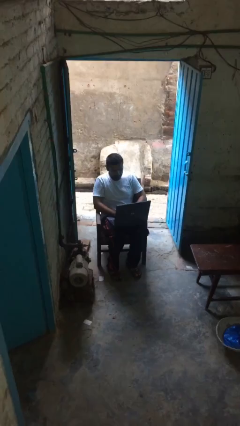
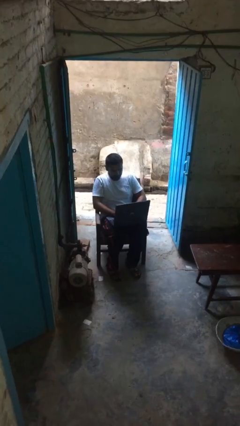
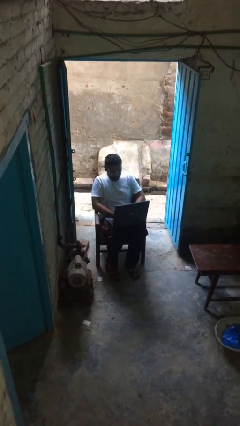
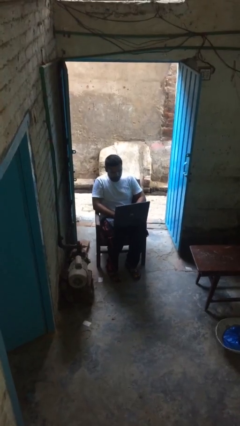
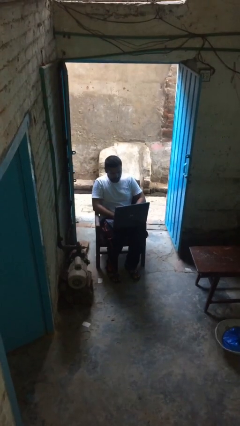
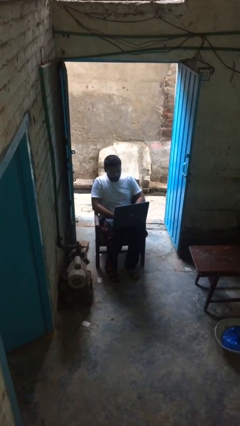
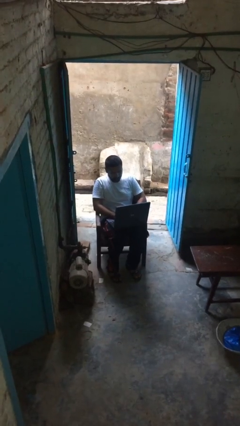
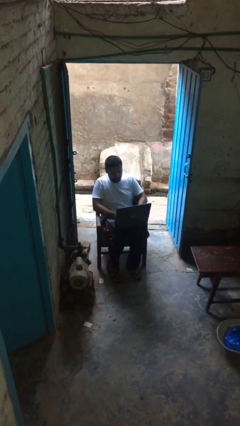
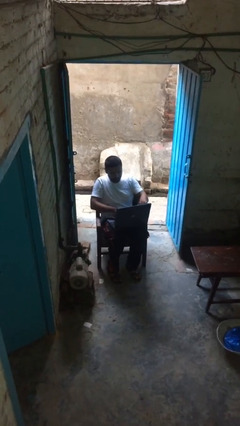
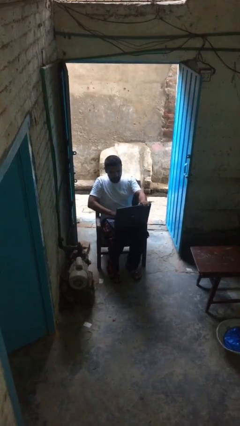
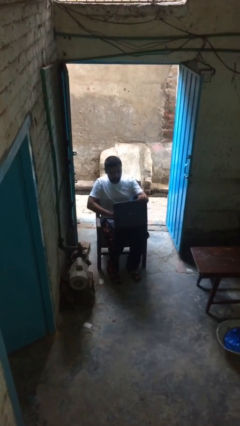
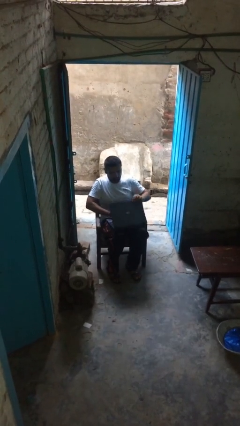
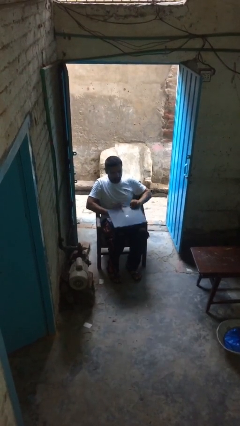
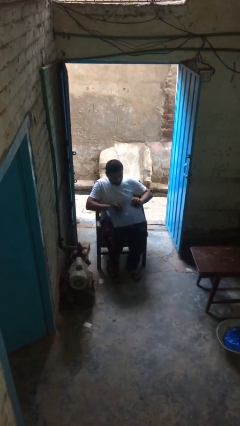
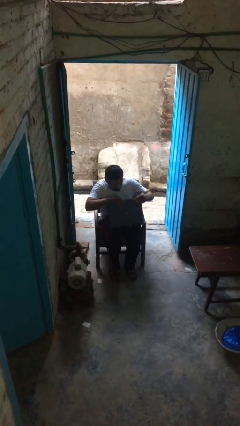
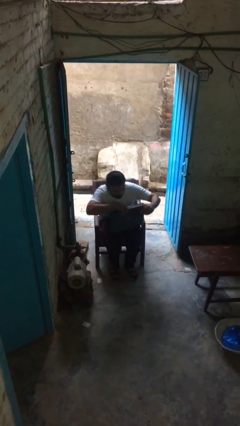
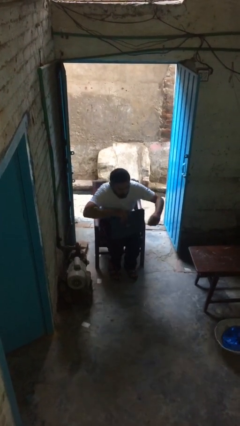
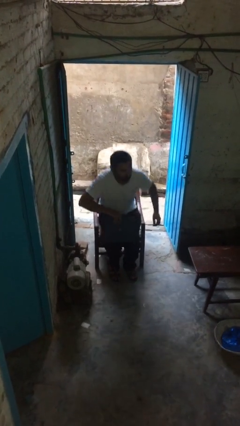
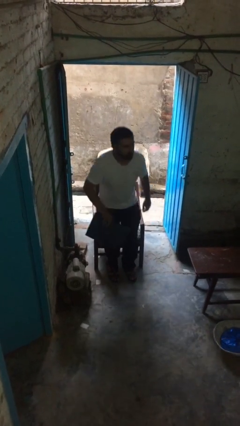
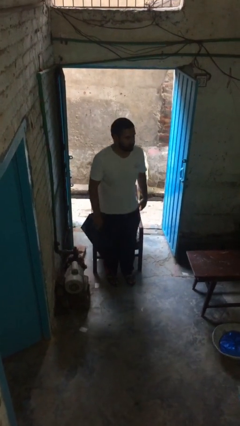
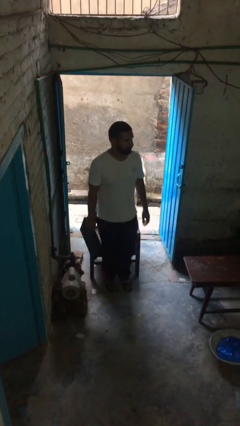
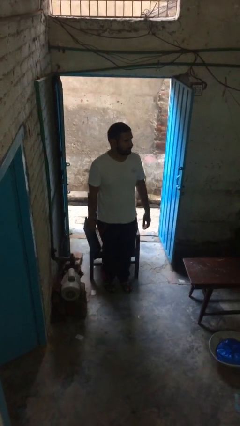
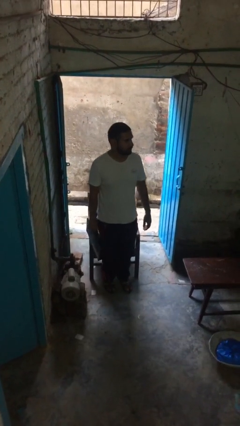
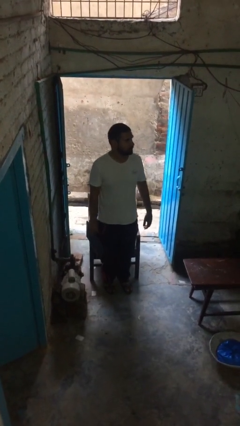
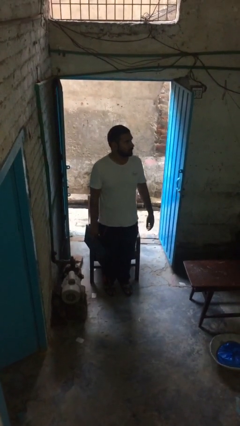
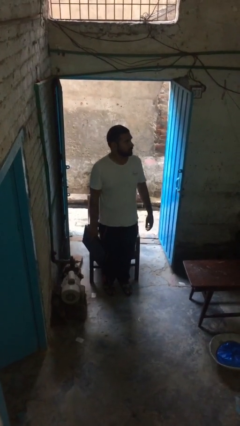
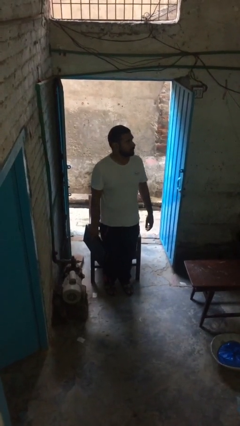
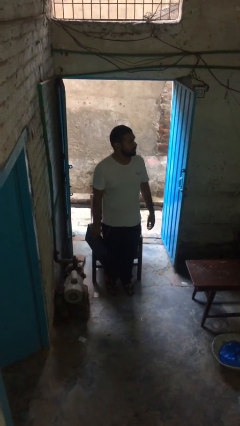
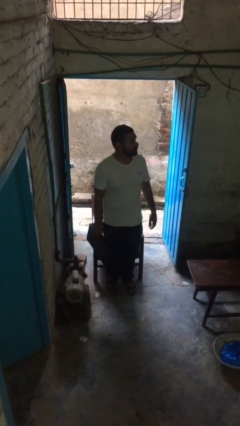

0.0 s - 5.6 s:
person stands up

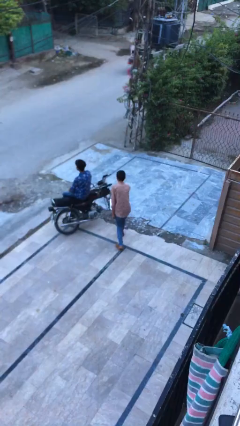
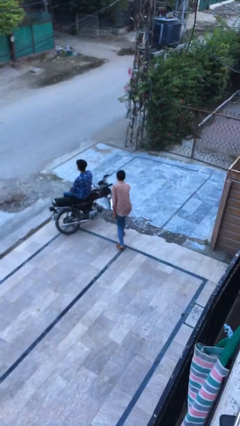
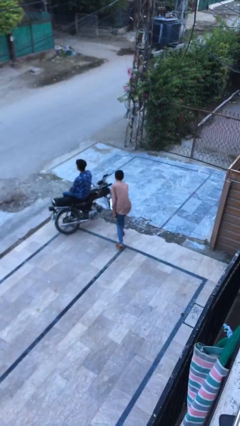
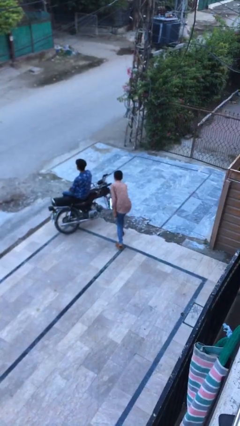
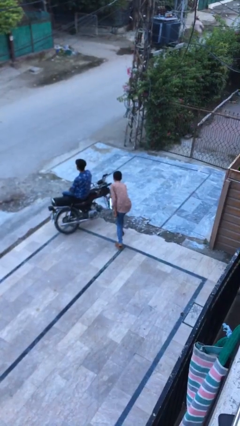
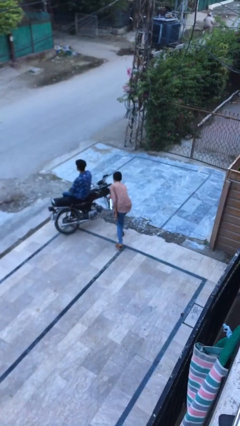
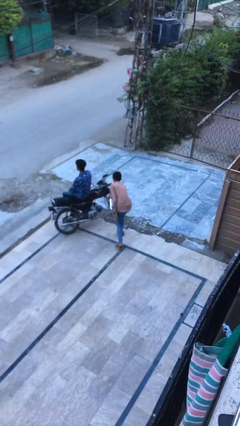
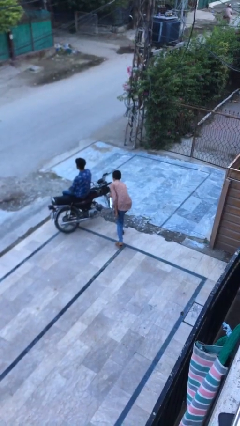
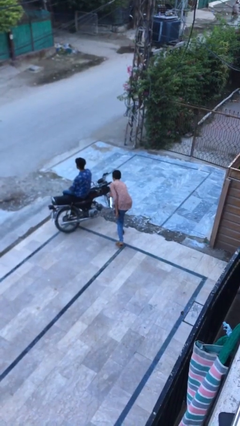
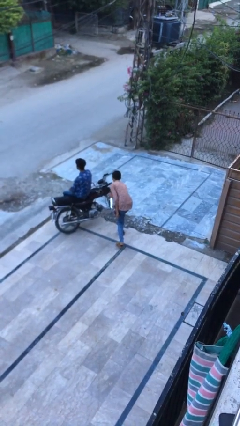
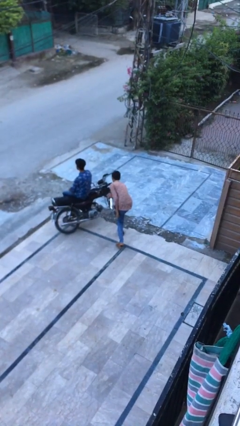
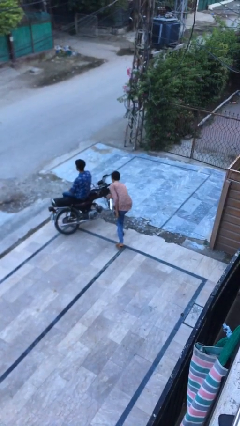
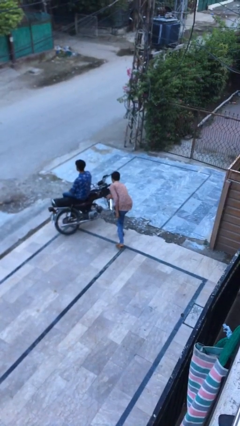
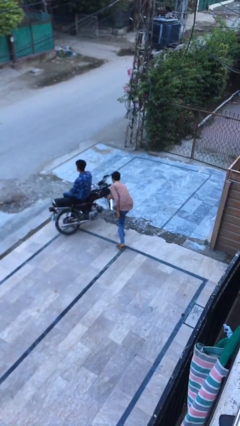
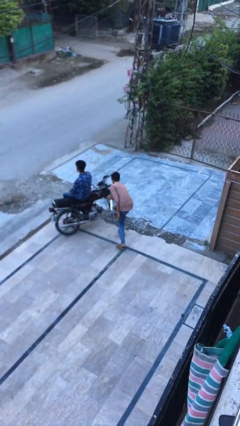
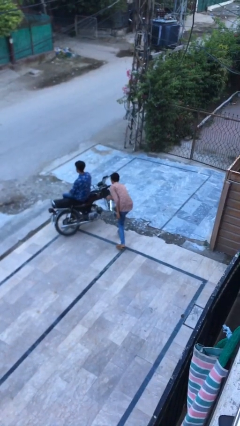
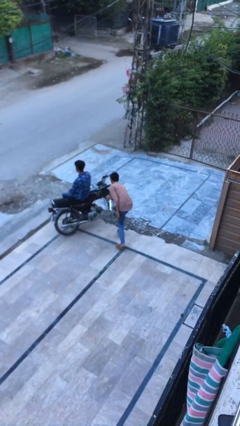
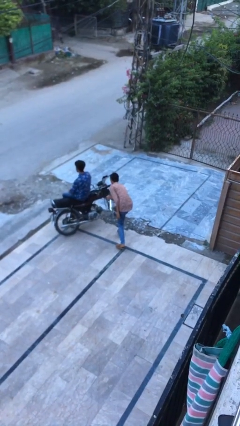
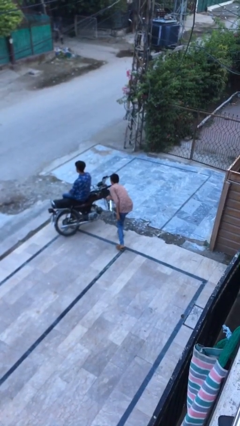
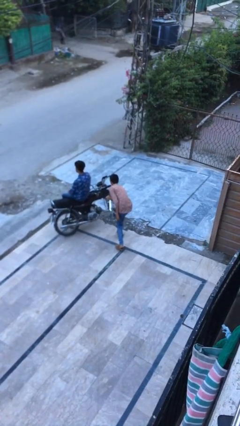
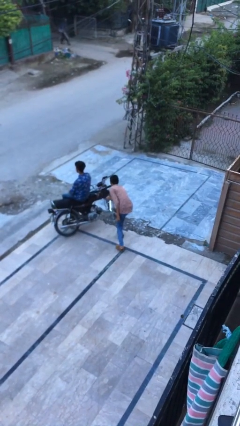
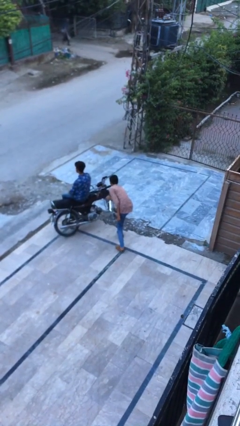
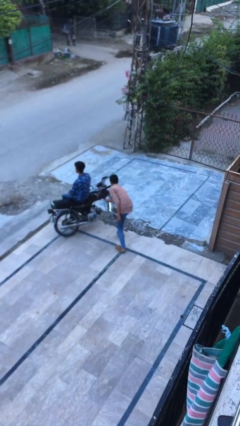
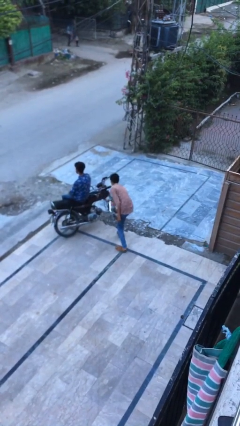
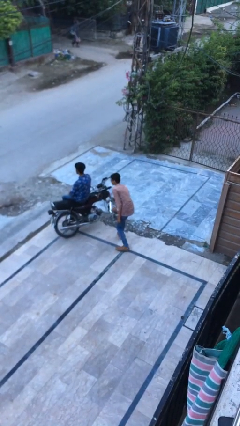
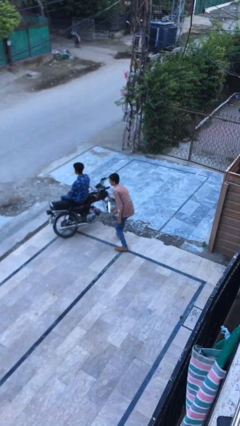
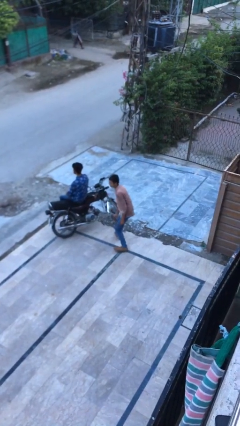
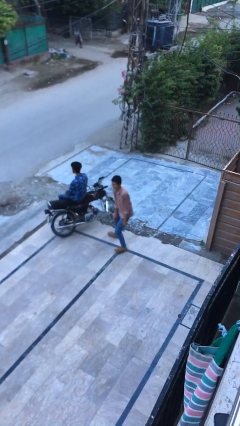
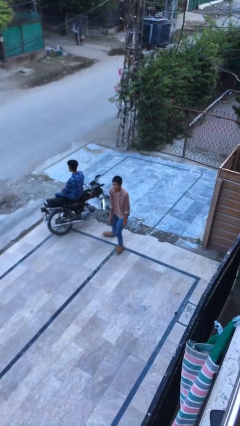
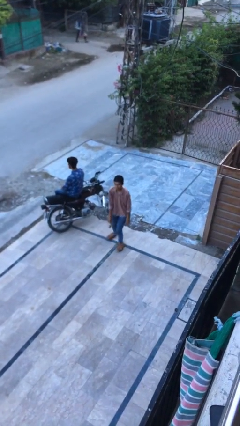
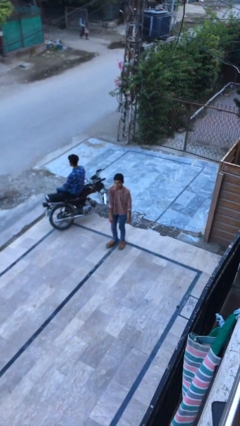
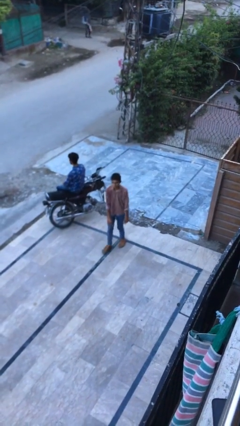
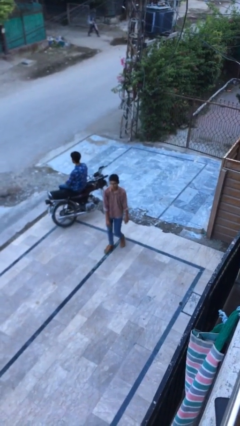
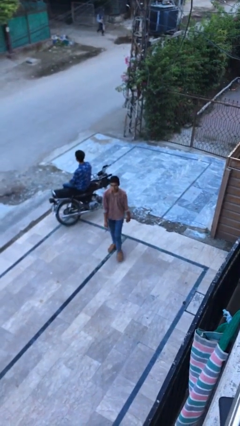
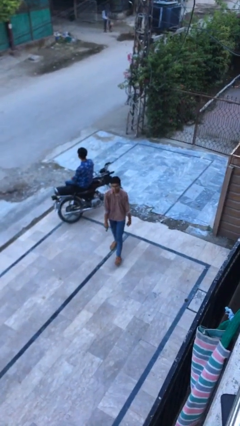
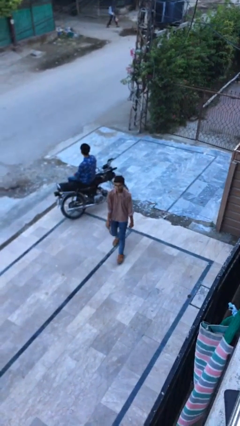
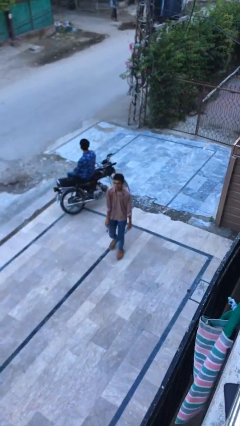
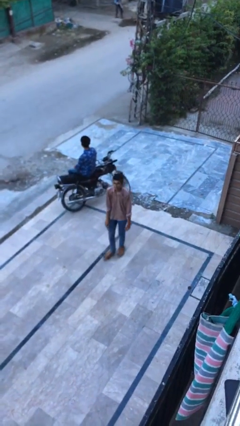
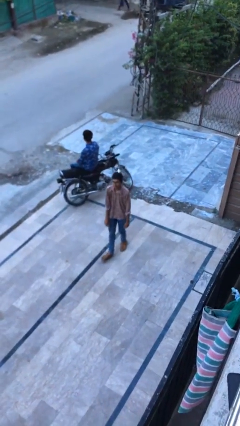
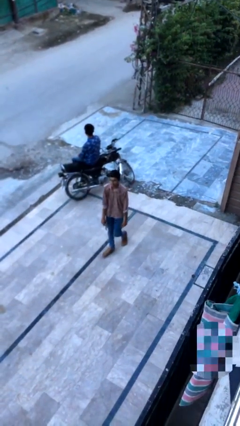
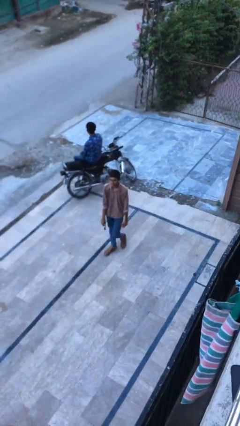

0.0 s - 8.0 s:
person steals object from person

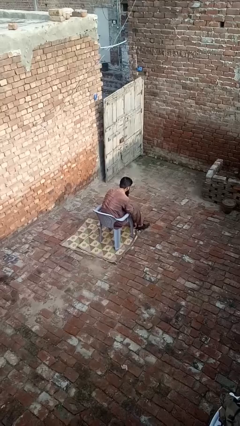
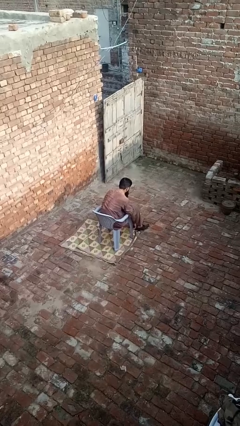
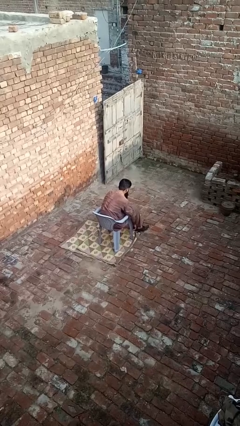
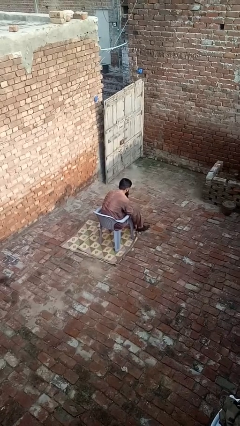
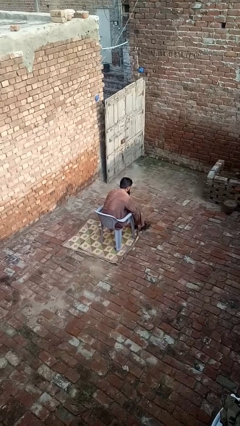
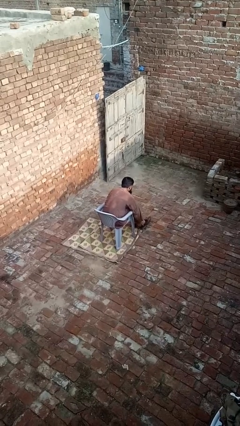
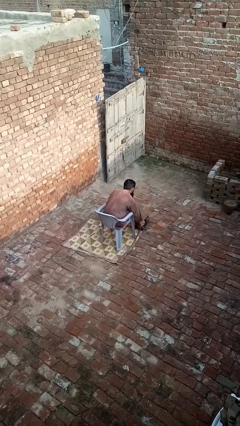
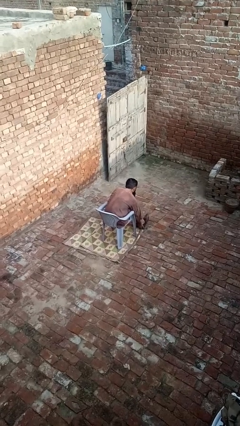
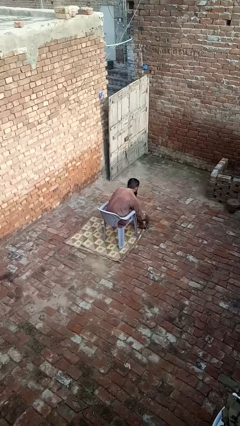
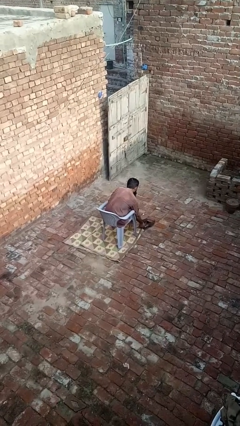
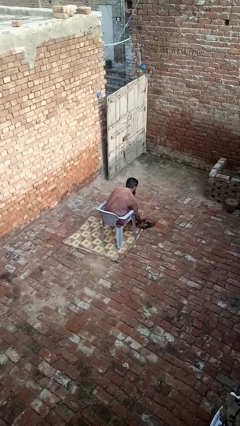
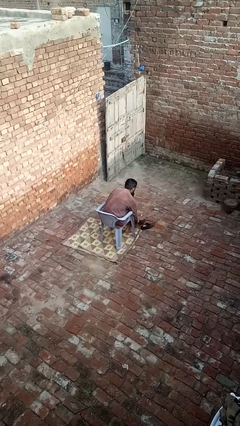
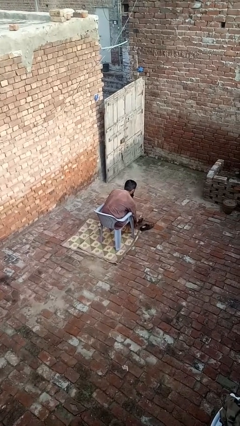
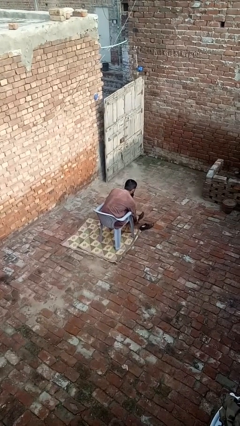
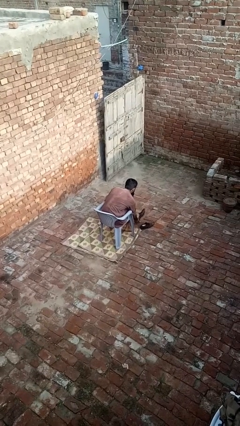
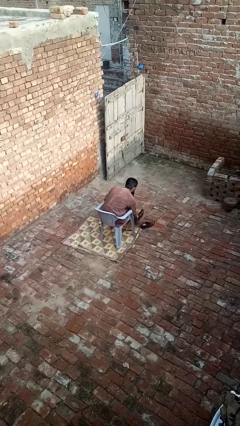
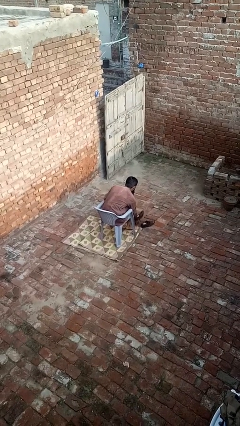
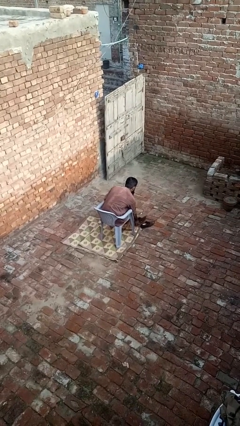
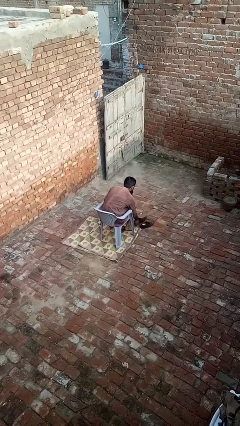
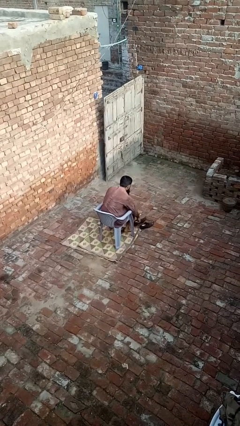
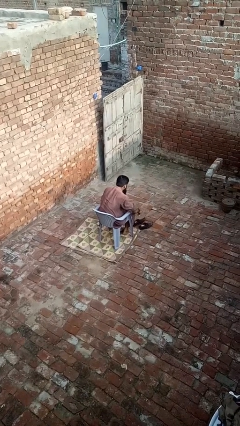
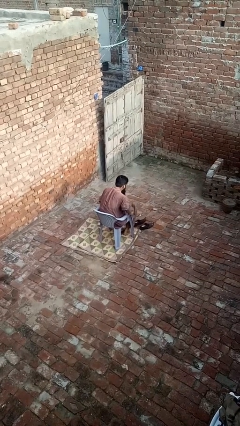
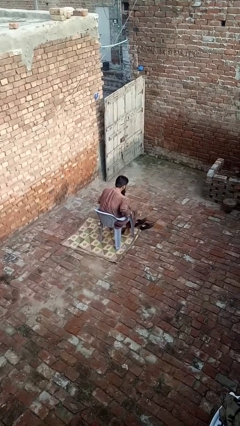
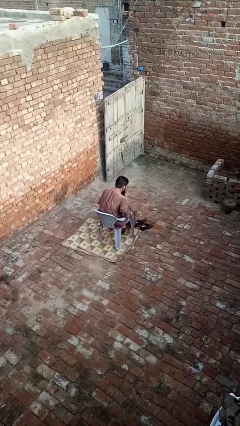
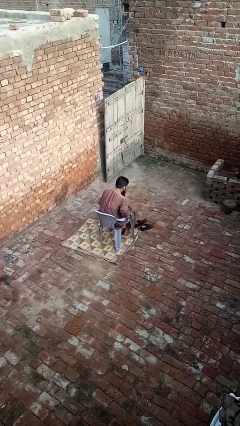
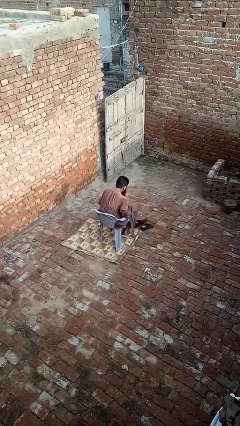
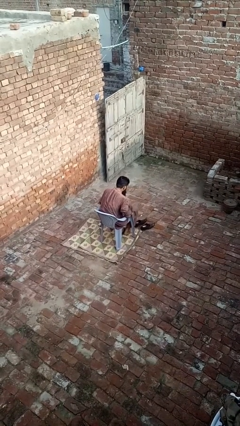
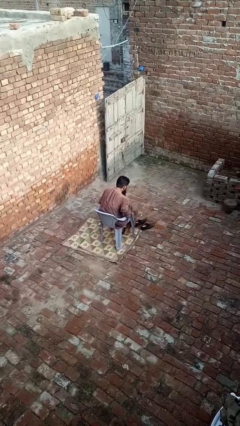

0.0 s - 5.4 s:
person takes off shoes
